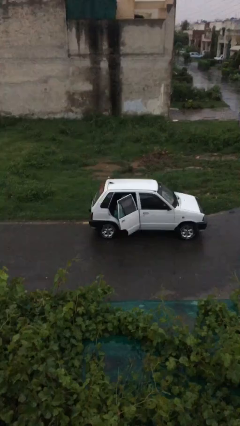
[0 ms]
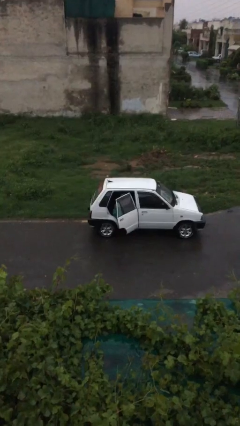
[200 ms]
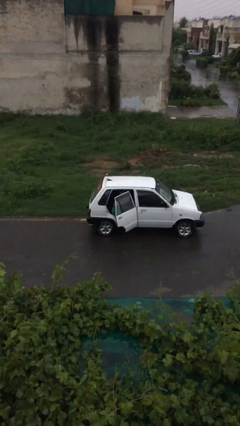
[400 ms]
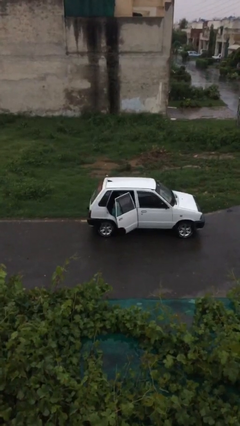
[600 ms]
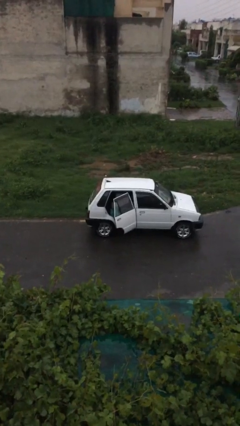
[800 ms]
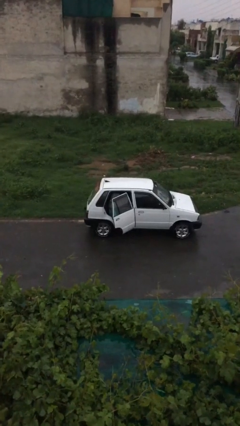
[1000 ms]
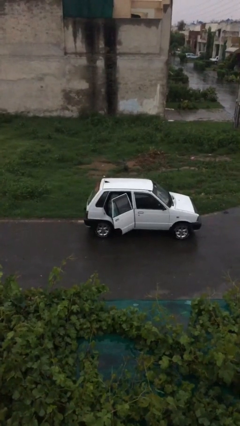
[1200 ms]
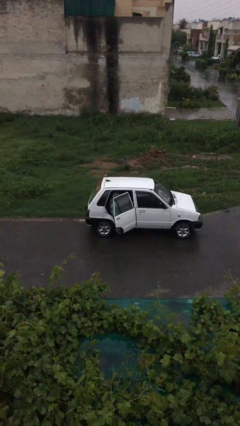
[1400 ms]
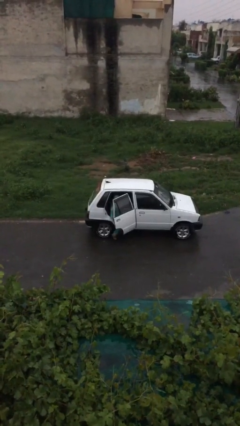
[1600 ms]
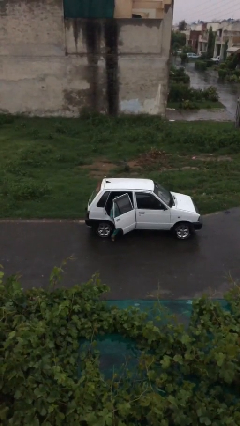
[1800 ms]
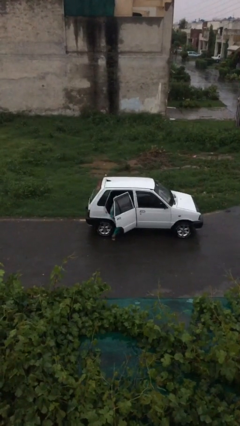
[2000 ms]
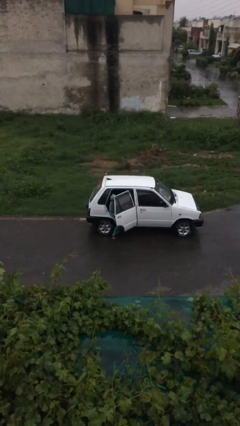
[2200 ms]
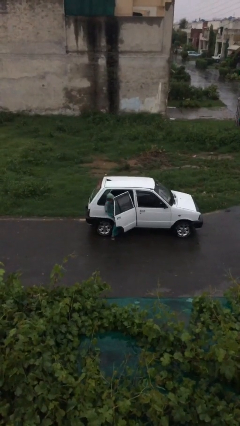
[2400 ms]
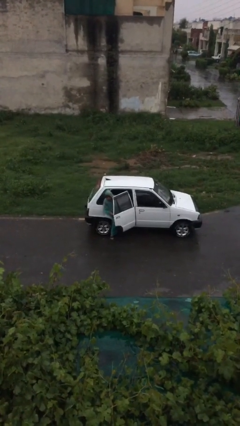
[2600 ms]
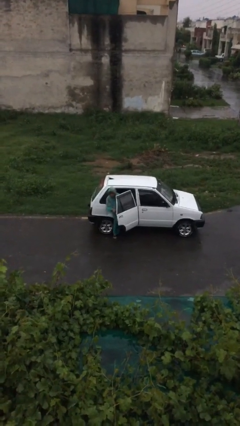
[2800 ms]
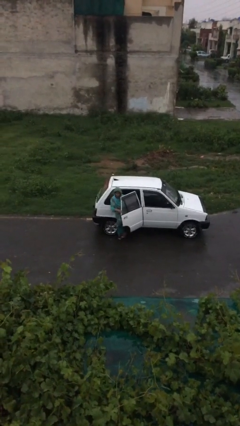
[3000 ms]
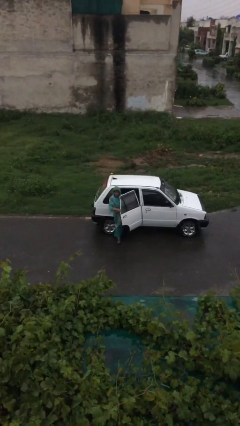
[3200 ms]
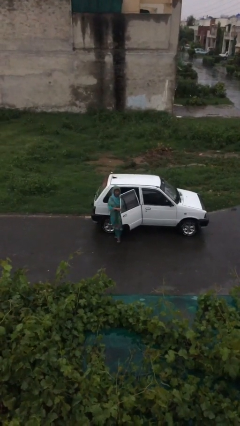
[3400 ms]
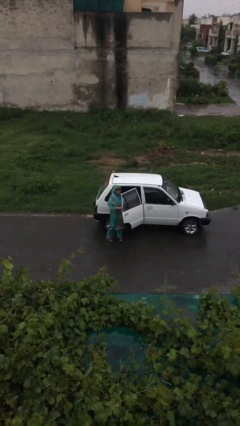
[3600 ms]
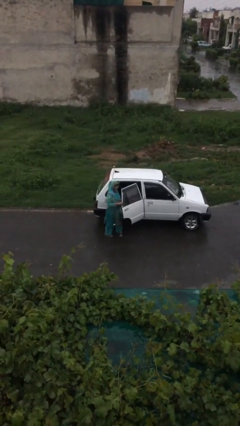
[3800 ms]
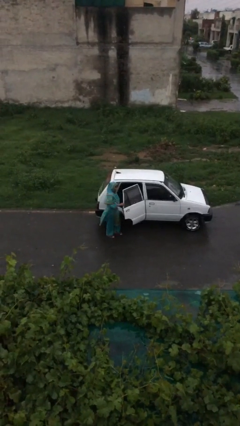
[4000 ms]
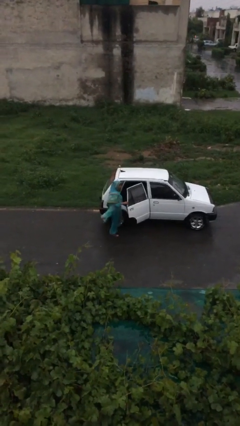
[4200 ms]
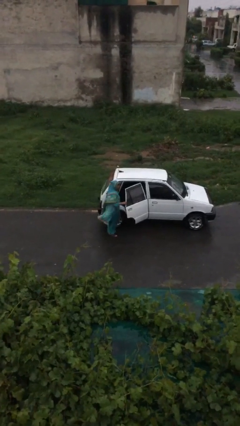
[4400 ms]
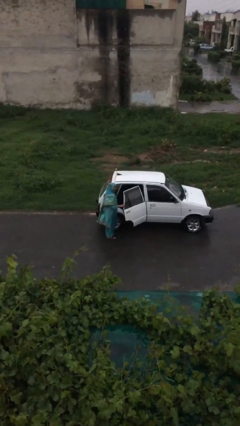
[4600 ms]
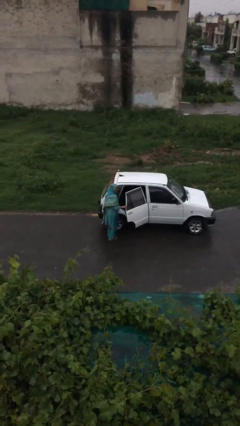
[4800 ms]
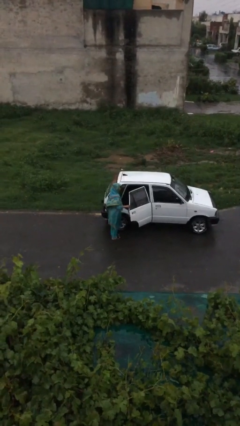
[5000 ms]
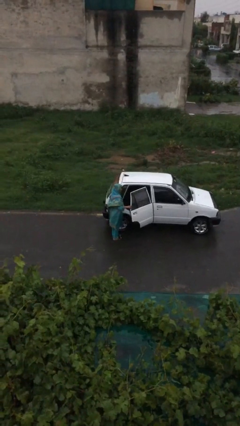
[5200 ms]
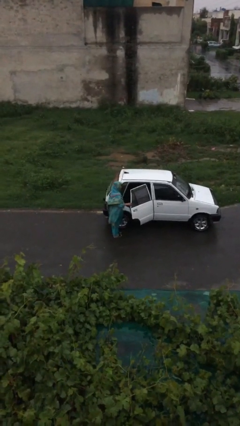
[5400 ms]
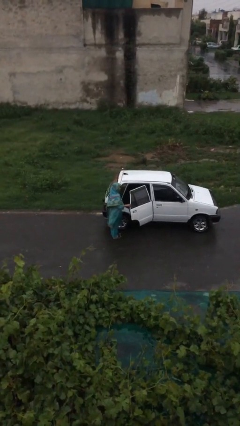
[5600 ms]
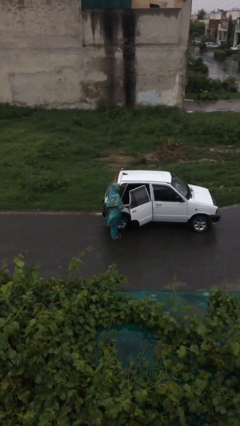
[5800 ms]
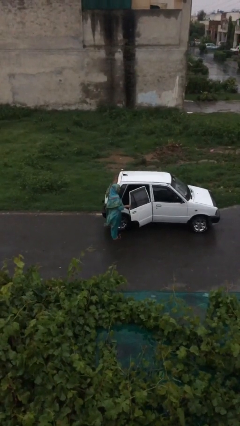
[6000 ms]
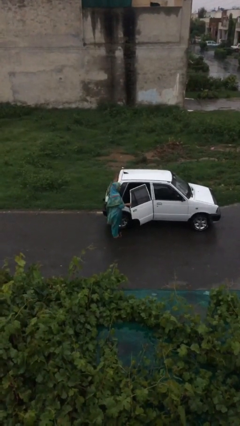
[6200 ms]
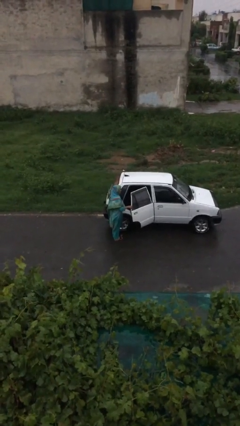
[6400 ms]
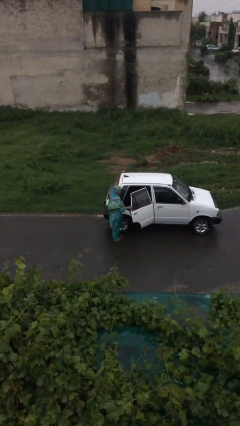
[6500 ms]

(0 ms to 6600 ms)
person exits car

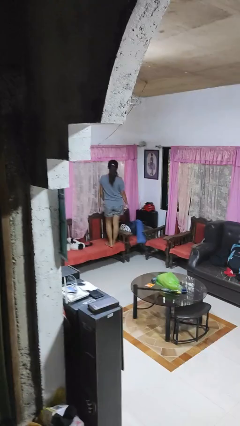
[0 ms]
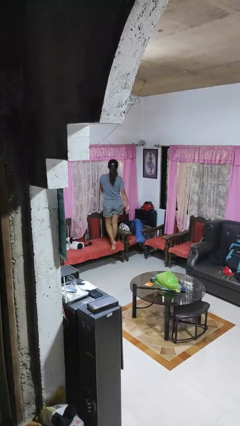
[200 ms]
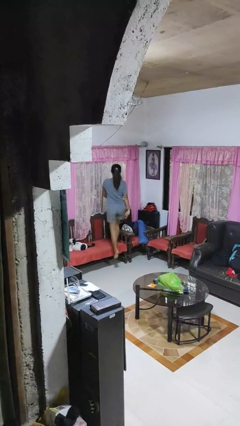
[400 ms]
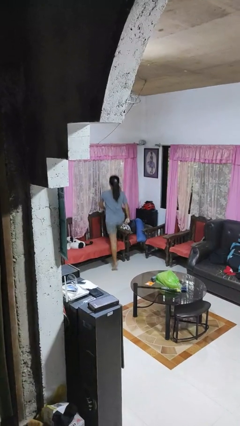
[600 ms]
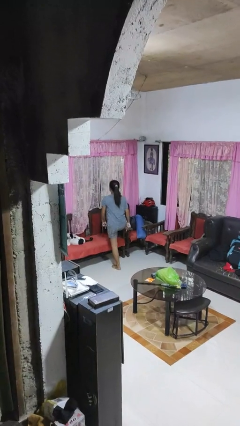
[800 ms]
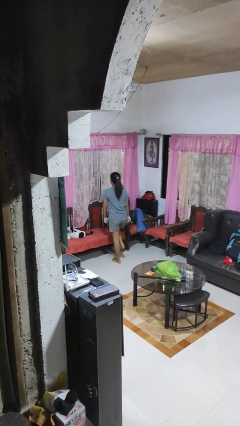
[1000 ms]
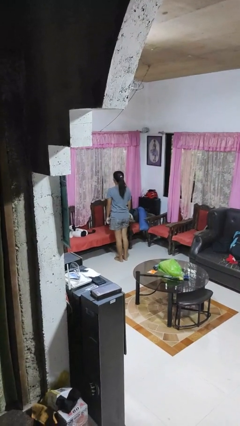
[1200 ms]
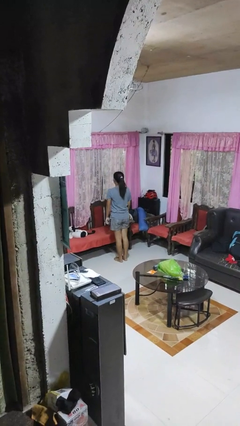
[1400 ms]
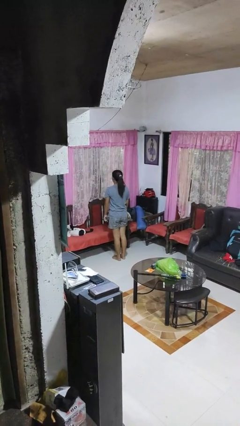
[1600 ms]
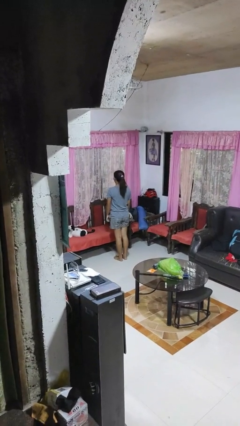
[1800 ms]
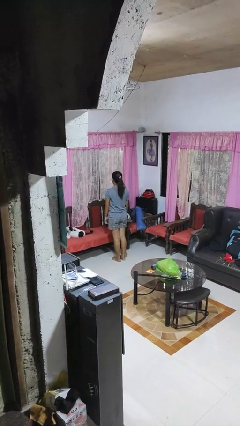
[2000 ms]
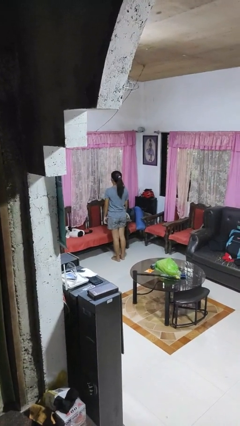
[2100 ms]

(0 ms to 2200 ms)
person climbs off chair

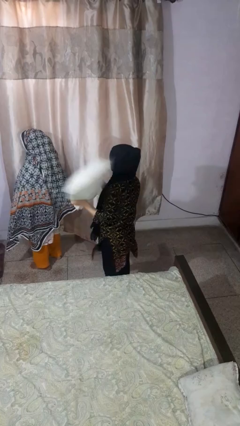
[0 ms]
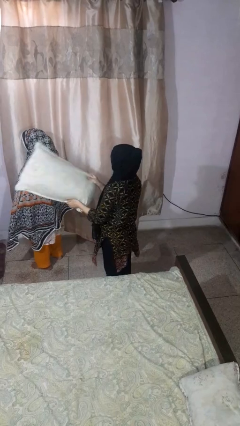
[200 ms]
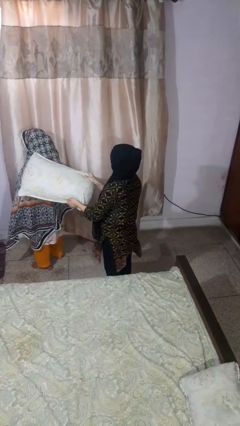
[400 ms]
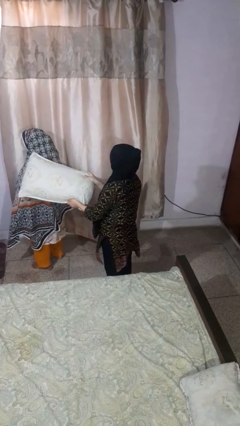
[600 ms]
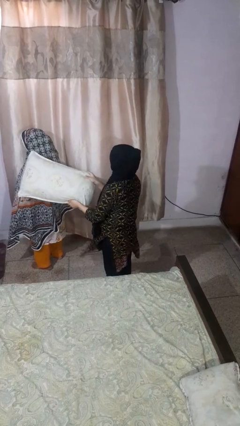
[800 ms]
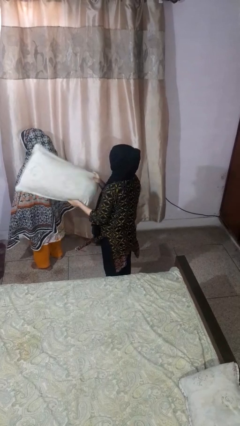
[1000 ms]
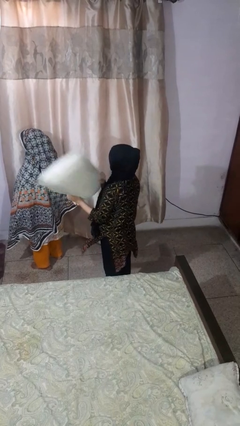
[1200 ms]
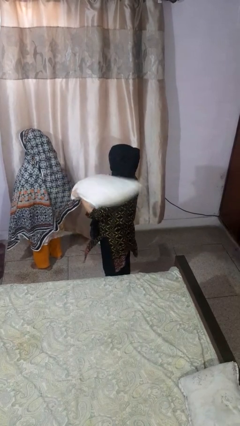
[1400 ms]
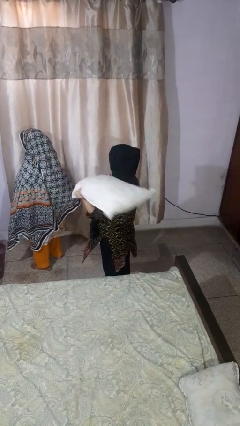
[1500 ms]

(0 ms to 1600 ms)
person hits person with pillow

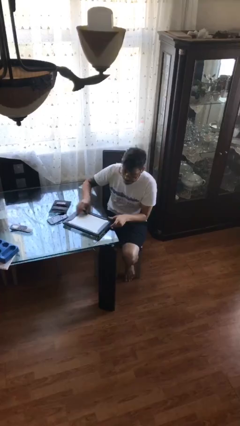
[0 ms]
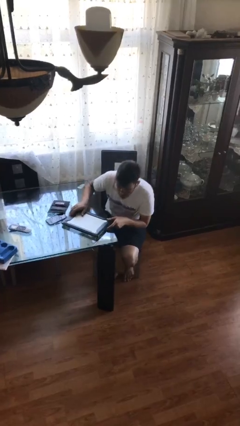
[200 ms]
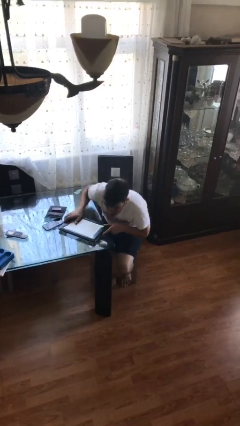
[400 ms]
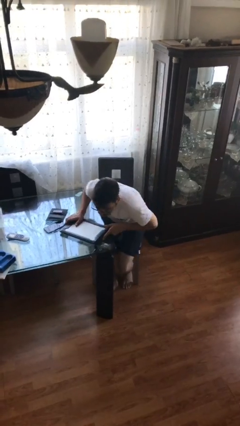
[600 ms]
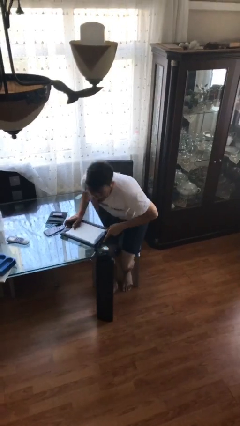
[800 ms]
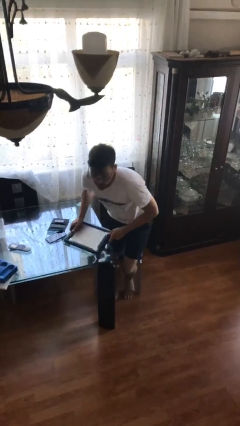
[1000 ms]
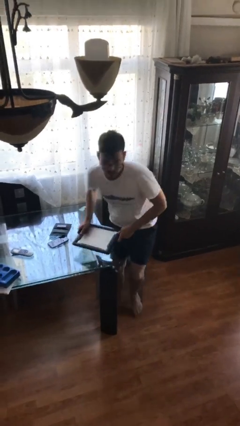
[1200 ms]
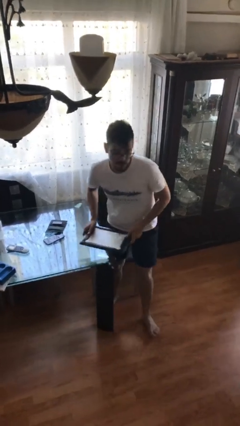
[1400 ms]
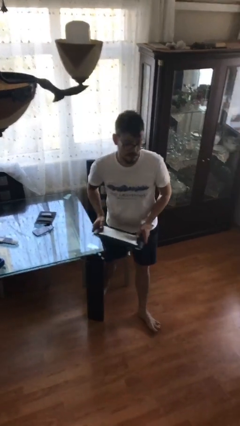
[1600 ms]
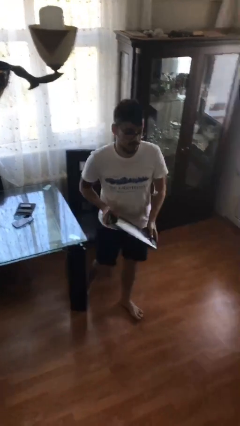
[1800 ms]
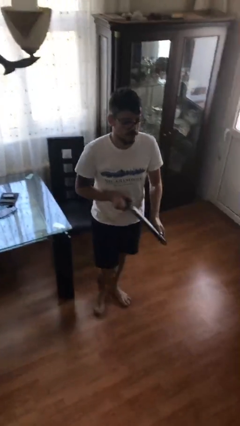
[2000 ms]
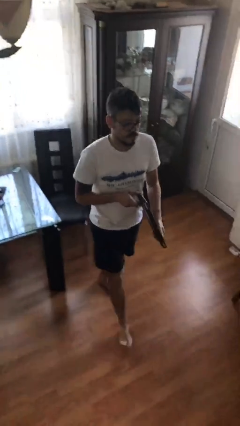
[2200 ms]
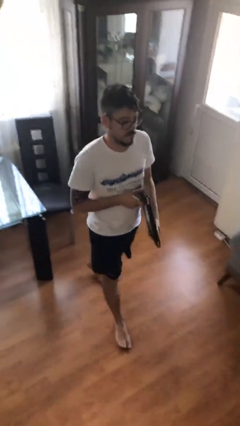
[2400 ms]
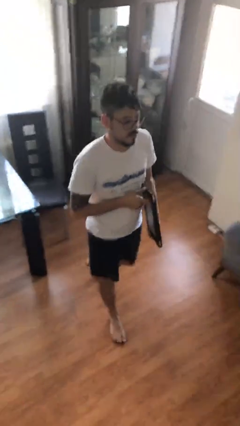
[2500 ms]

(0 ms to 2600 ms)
person stands up

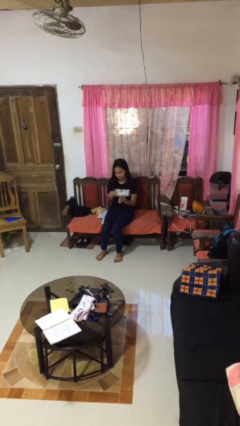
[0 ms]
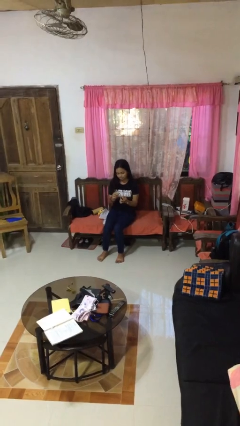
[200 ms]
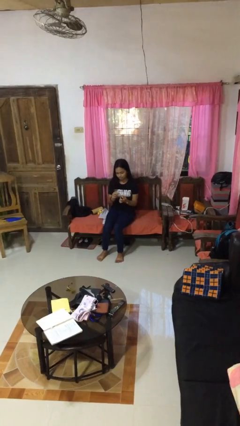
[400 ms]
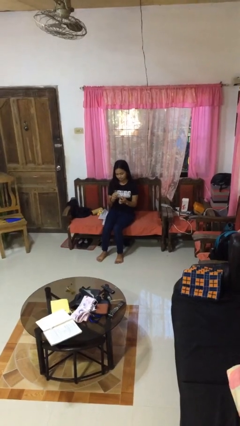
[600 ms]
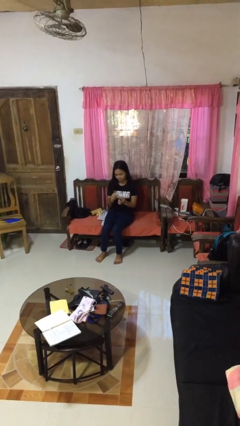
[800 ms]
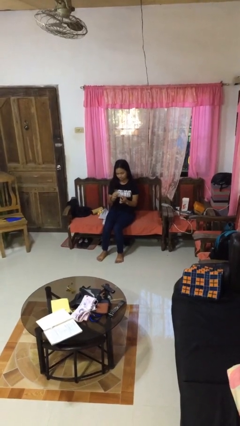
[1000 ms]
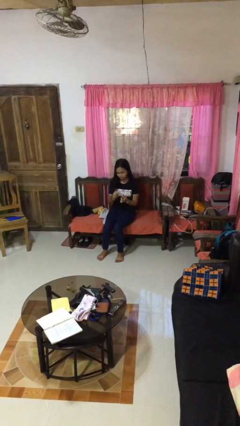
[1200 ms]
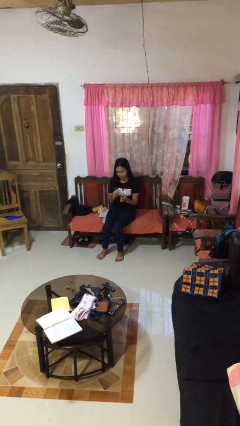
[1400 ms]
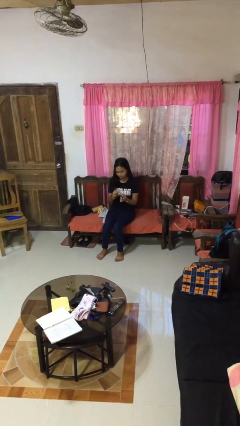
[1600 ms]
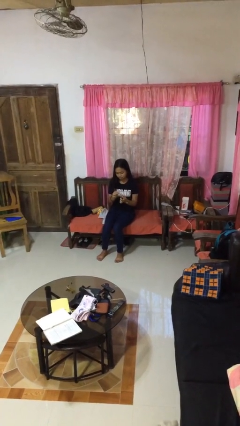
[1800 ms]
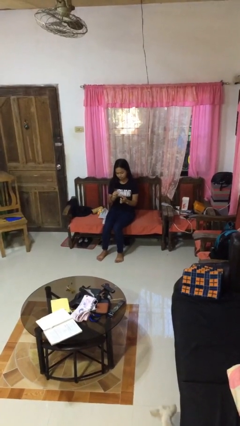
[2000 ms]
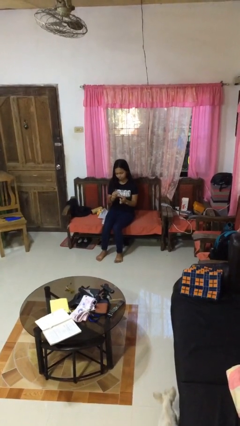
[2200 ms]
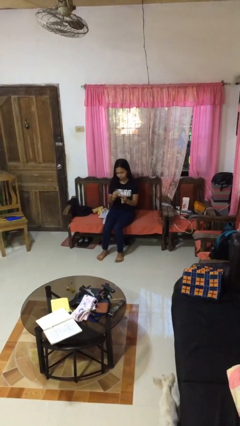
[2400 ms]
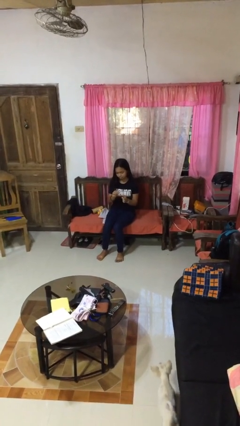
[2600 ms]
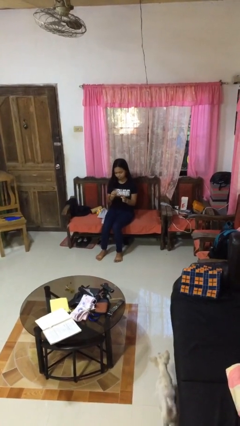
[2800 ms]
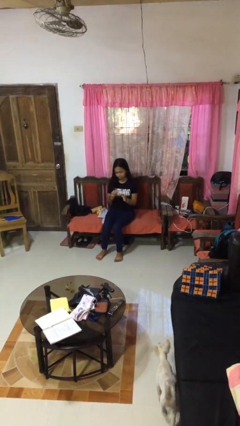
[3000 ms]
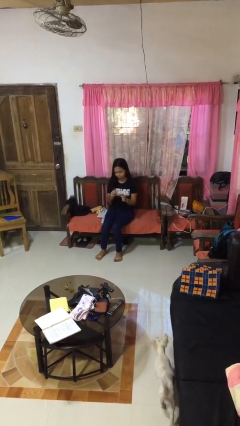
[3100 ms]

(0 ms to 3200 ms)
person clips fingernails

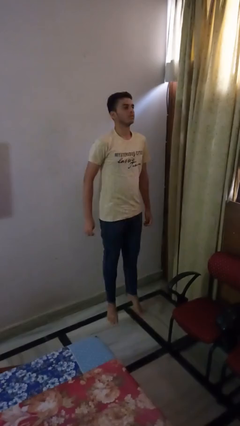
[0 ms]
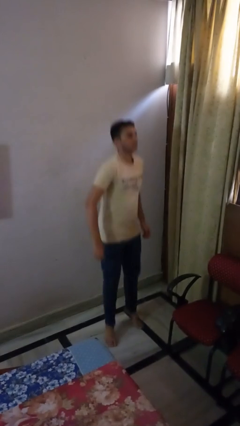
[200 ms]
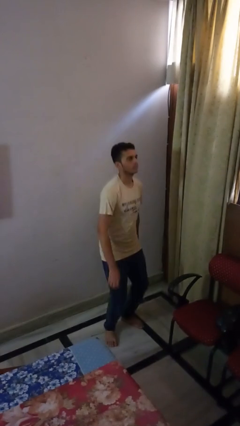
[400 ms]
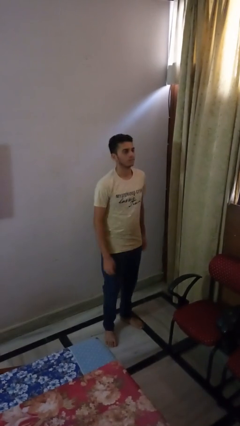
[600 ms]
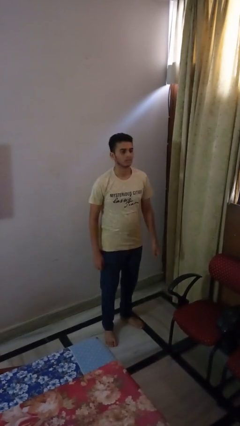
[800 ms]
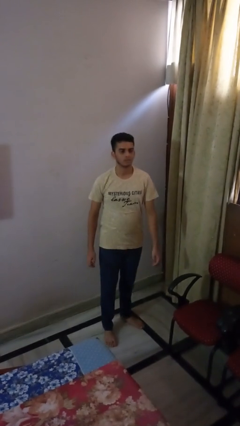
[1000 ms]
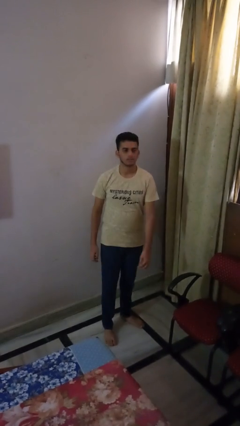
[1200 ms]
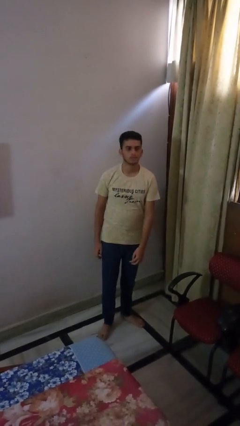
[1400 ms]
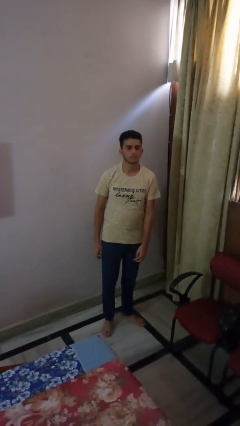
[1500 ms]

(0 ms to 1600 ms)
person jumps
